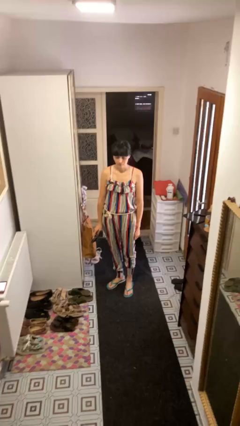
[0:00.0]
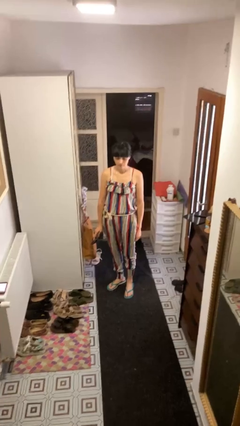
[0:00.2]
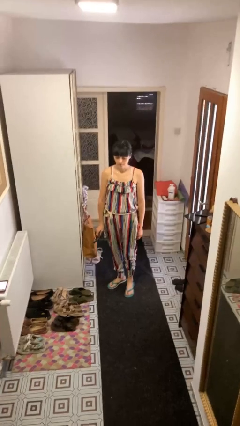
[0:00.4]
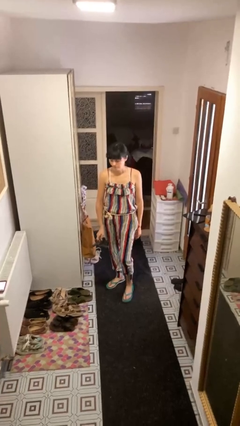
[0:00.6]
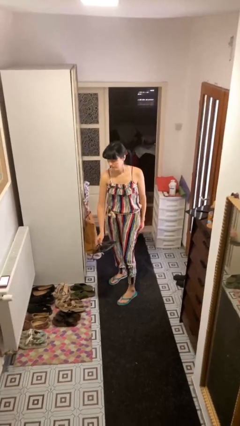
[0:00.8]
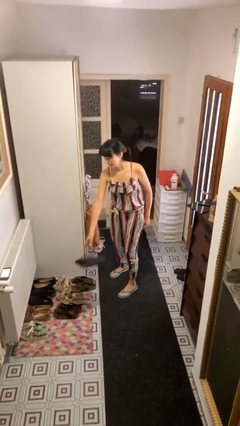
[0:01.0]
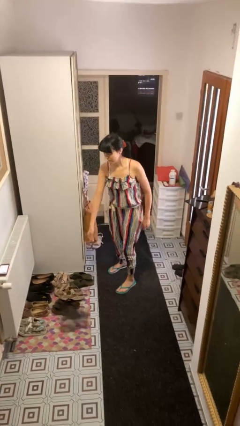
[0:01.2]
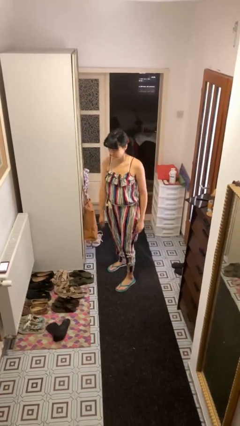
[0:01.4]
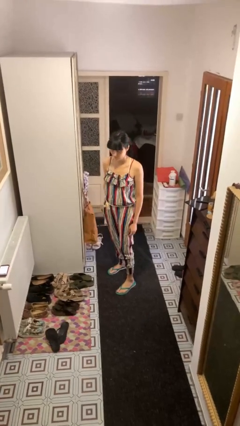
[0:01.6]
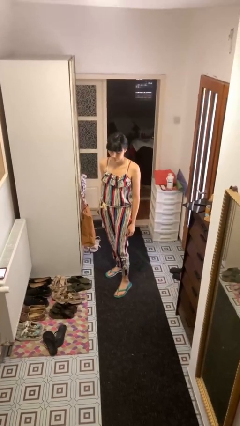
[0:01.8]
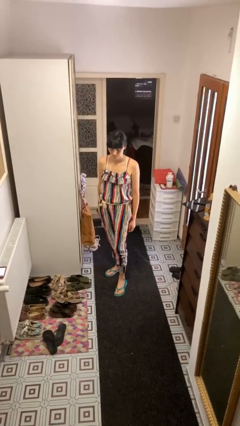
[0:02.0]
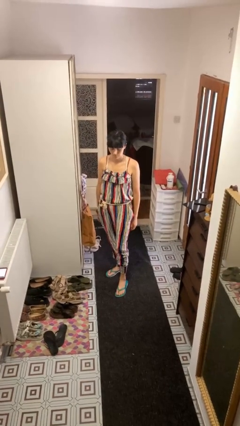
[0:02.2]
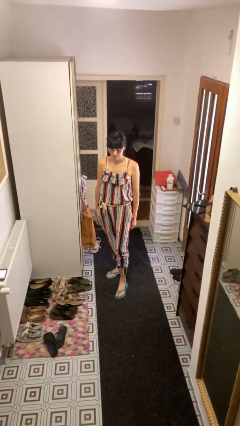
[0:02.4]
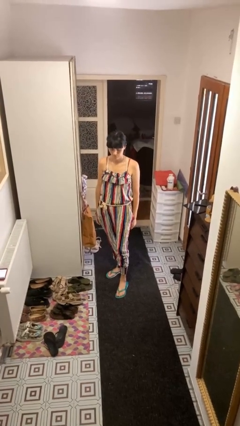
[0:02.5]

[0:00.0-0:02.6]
person throws object to ground

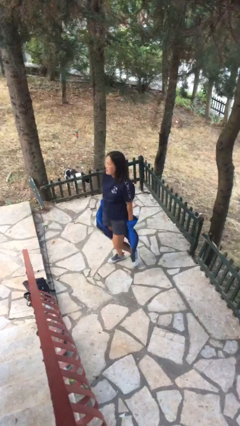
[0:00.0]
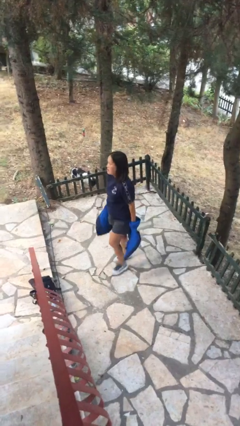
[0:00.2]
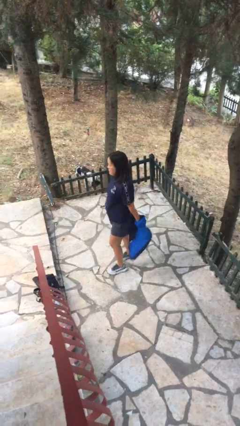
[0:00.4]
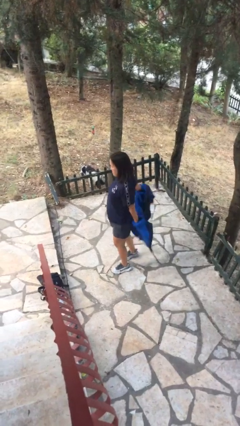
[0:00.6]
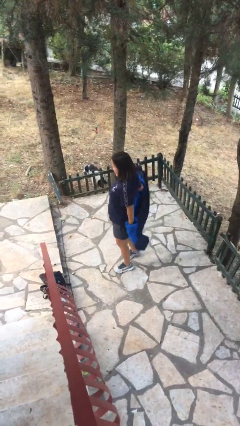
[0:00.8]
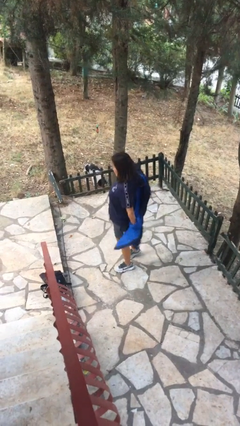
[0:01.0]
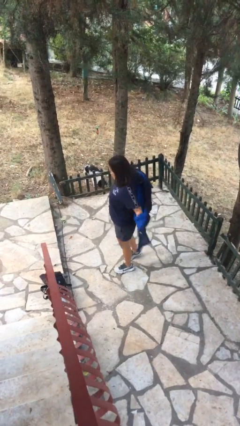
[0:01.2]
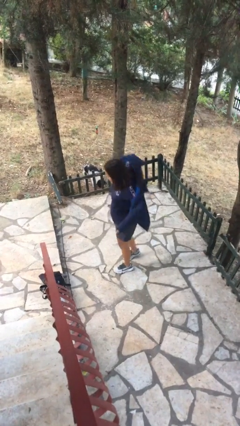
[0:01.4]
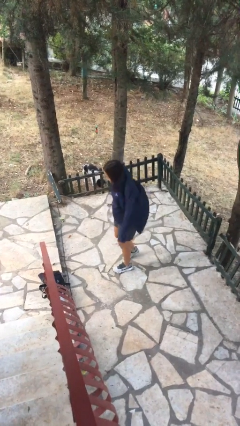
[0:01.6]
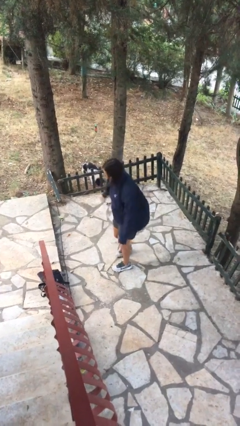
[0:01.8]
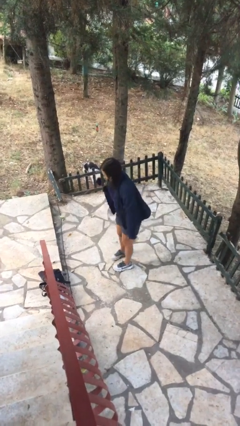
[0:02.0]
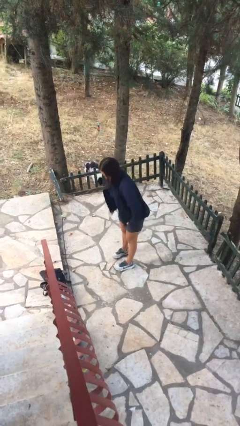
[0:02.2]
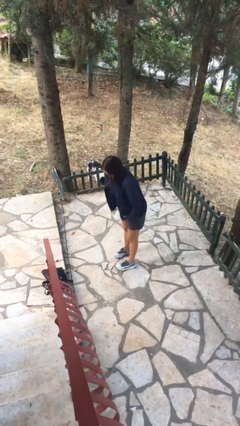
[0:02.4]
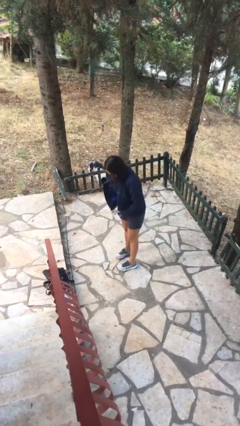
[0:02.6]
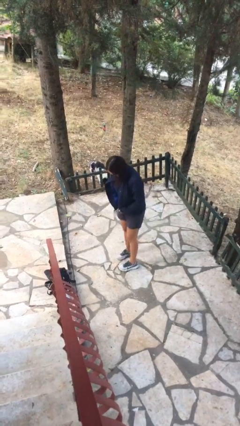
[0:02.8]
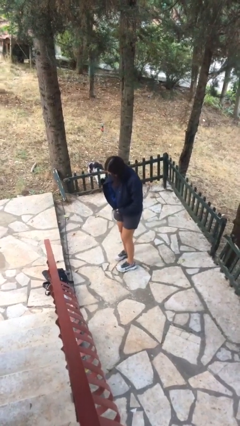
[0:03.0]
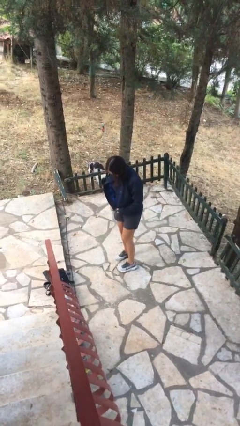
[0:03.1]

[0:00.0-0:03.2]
person puts on jacket

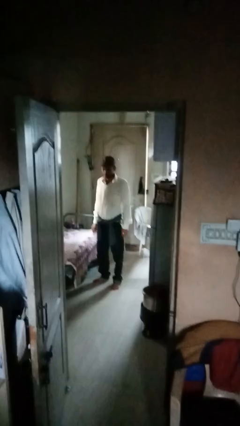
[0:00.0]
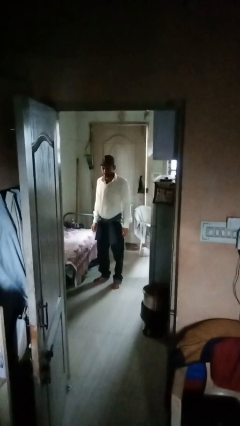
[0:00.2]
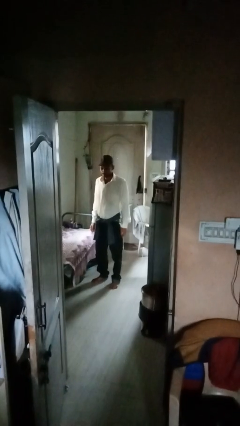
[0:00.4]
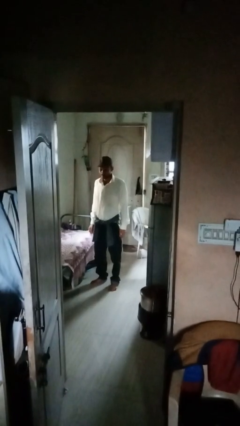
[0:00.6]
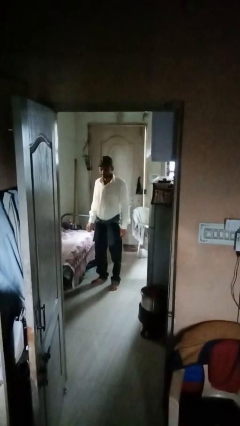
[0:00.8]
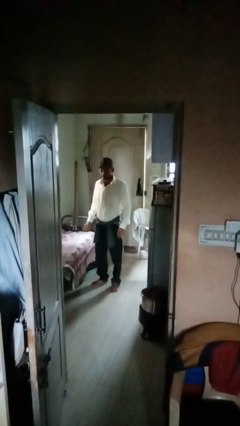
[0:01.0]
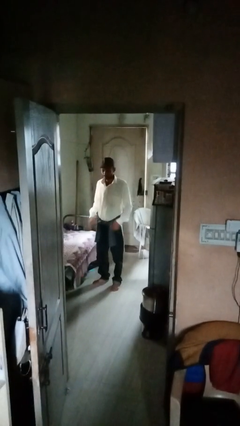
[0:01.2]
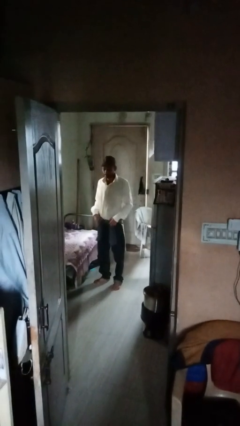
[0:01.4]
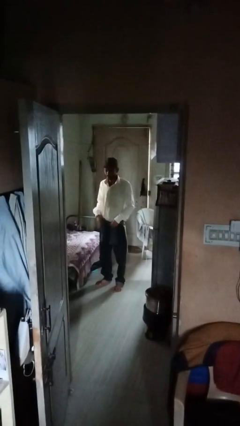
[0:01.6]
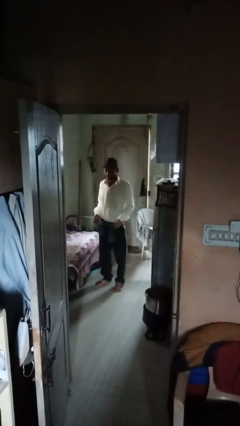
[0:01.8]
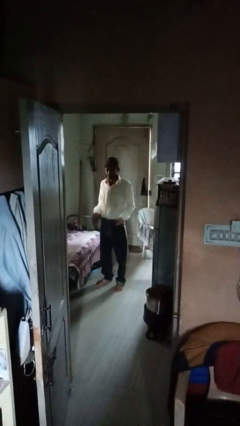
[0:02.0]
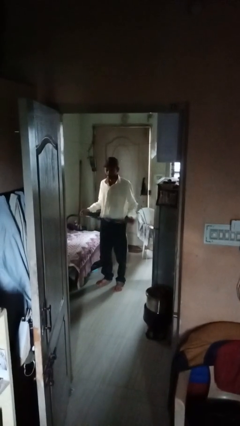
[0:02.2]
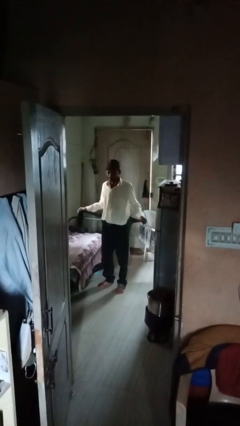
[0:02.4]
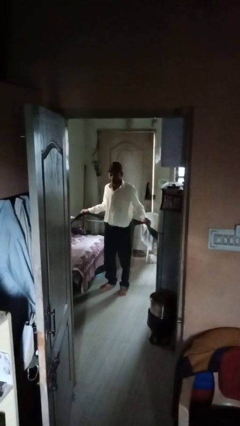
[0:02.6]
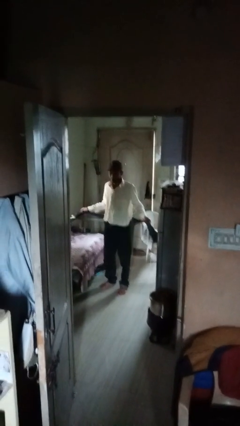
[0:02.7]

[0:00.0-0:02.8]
person unties jacket around waist

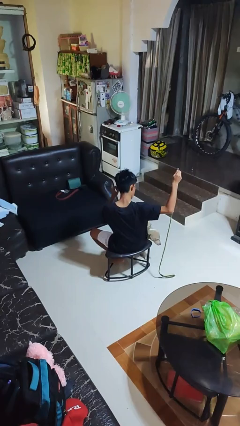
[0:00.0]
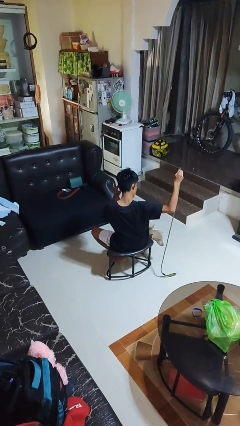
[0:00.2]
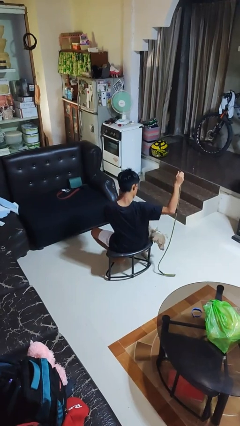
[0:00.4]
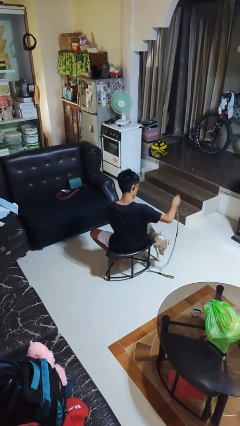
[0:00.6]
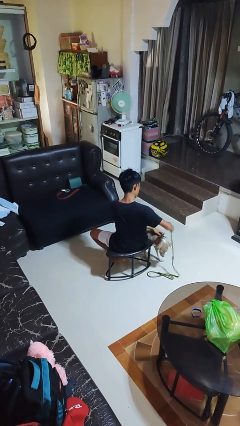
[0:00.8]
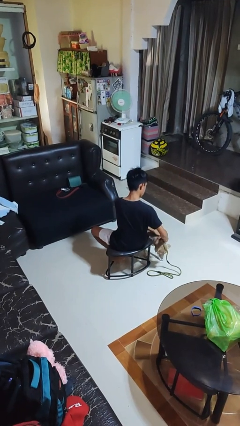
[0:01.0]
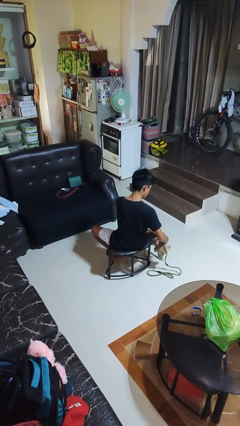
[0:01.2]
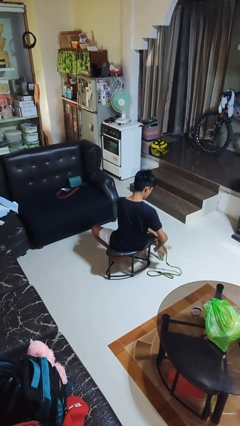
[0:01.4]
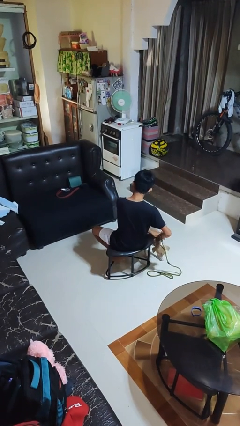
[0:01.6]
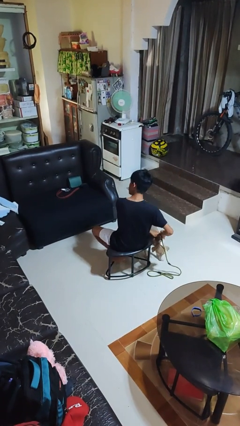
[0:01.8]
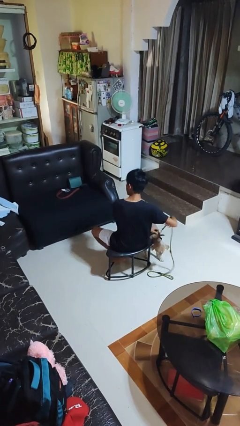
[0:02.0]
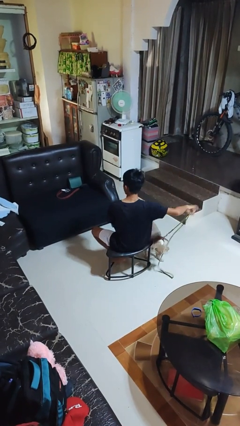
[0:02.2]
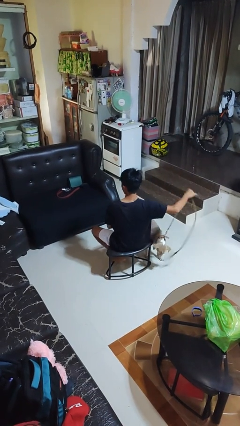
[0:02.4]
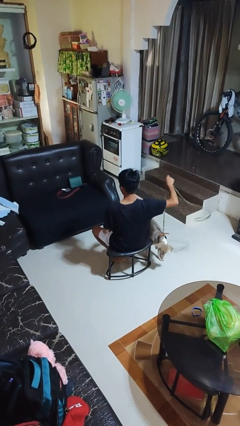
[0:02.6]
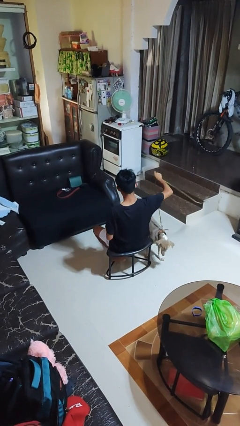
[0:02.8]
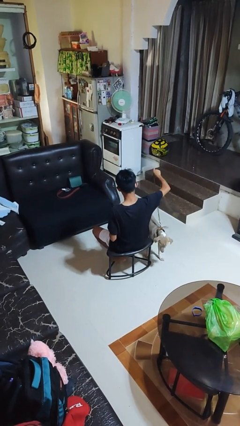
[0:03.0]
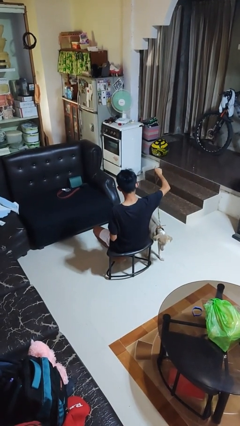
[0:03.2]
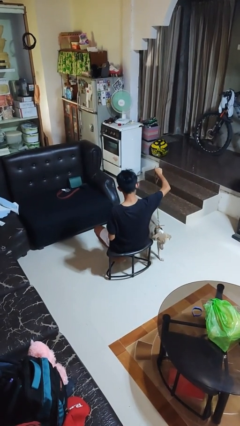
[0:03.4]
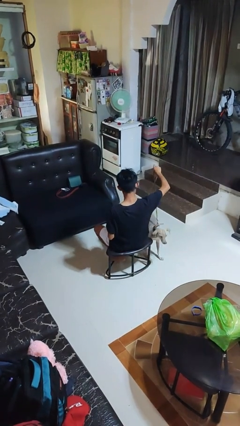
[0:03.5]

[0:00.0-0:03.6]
person attaches leash to dog

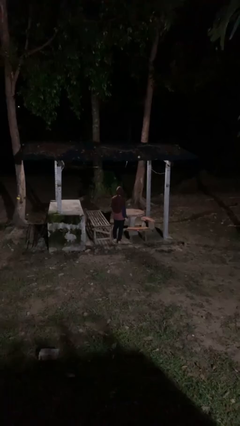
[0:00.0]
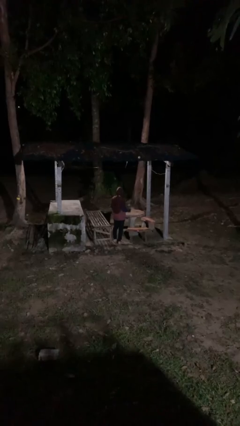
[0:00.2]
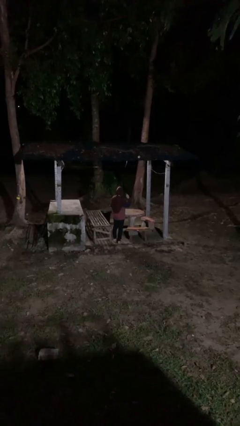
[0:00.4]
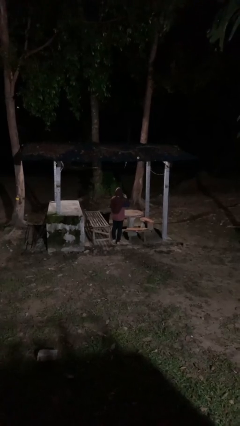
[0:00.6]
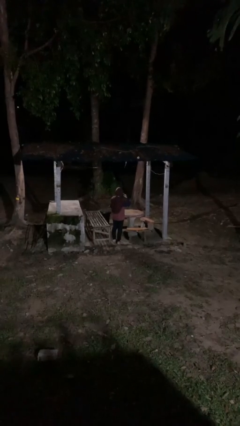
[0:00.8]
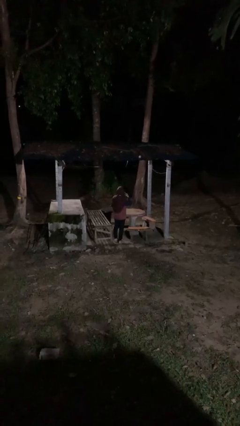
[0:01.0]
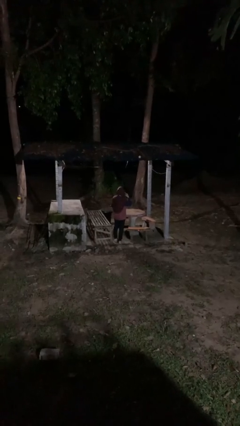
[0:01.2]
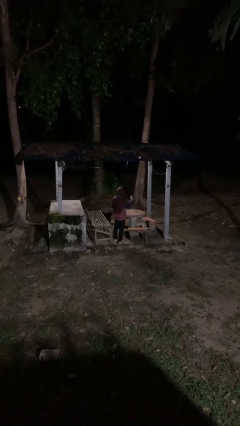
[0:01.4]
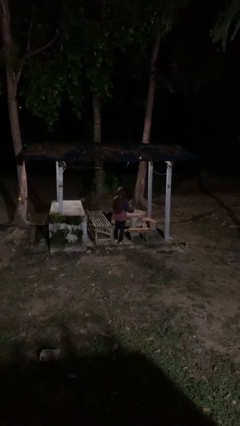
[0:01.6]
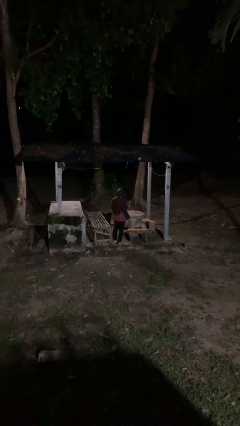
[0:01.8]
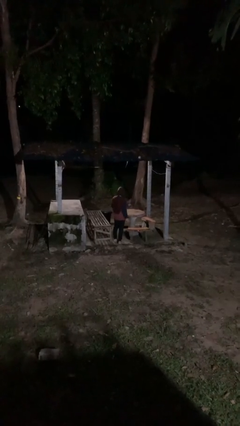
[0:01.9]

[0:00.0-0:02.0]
person gestures listen closely

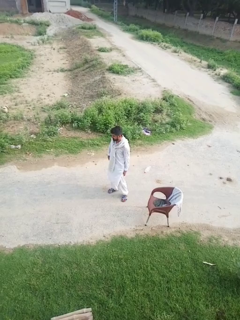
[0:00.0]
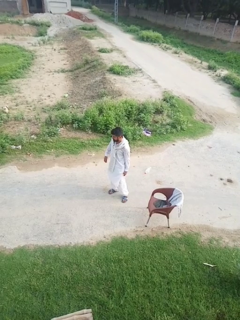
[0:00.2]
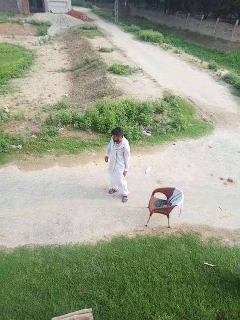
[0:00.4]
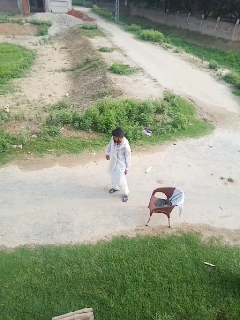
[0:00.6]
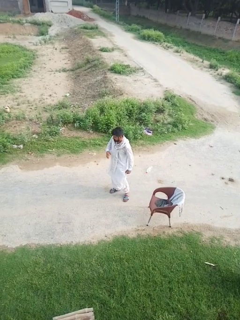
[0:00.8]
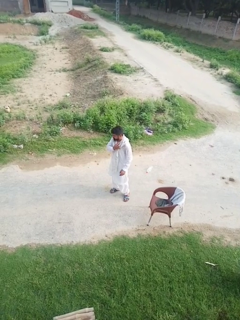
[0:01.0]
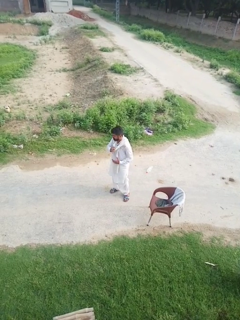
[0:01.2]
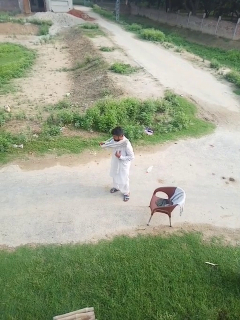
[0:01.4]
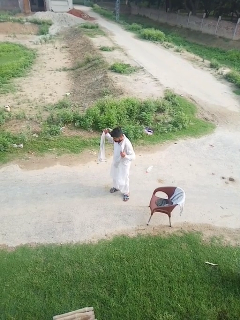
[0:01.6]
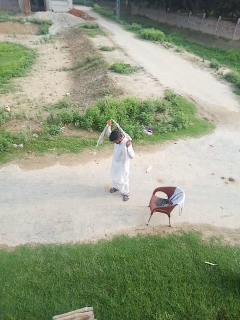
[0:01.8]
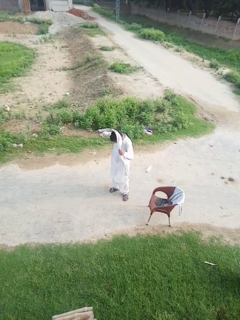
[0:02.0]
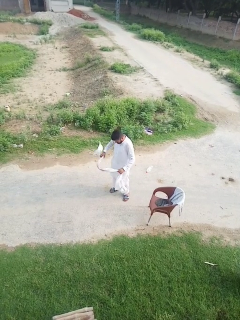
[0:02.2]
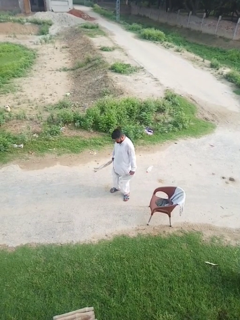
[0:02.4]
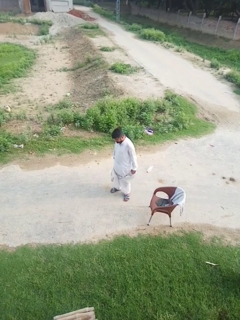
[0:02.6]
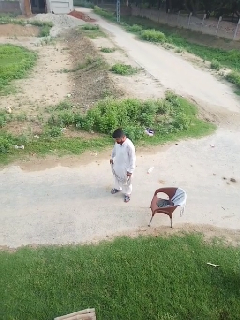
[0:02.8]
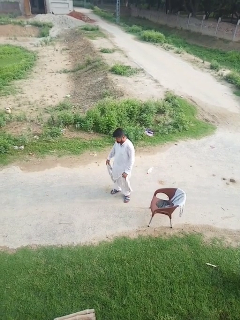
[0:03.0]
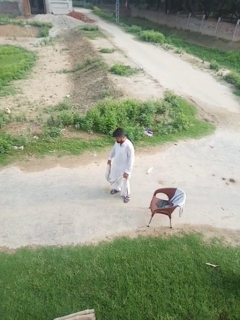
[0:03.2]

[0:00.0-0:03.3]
person takes off scarf

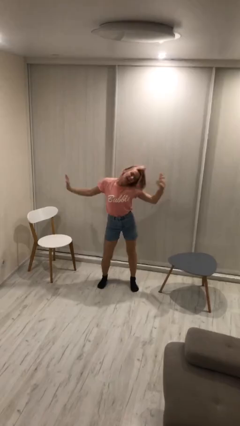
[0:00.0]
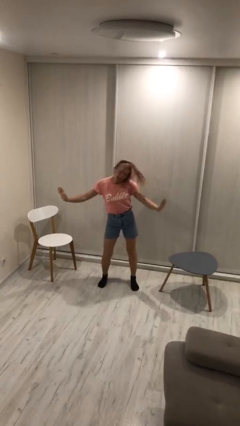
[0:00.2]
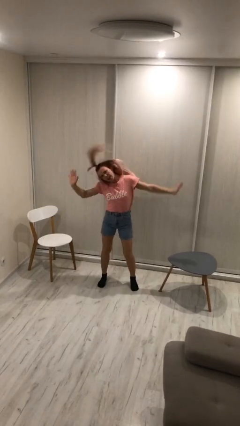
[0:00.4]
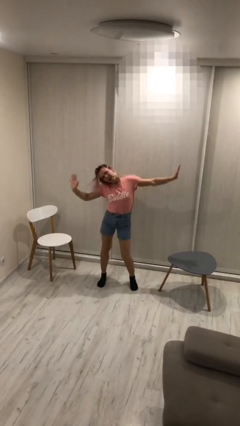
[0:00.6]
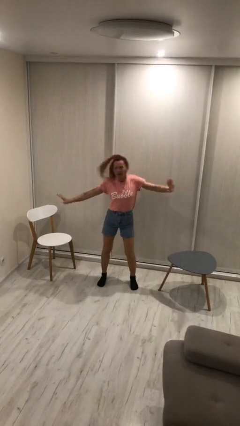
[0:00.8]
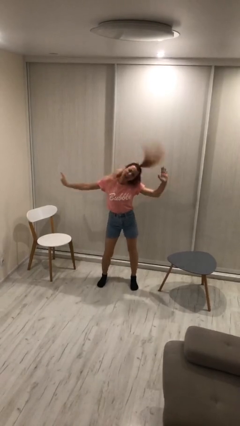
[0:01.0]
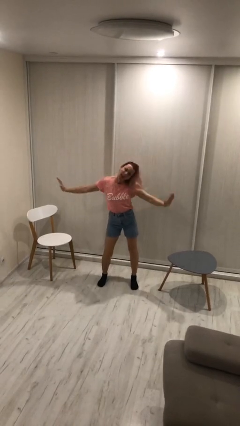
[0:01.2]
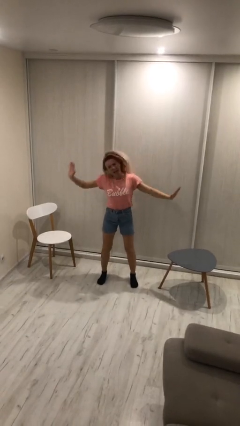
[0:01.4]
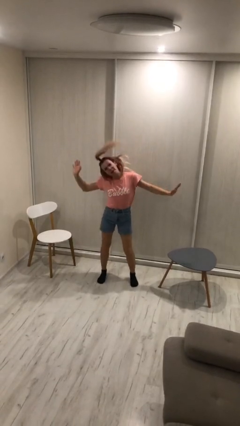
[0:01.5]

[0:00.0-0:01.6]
person dances in place
